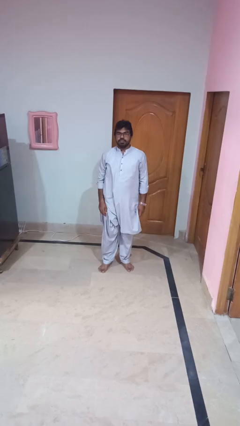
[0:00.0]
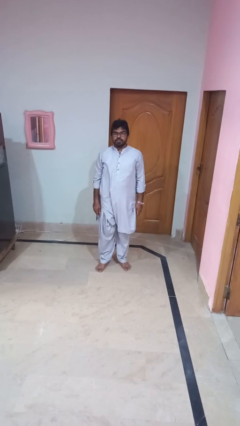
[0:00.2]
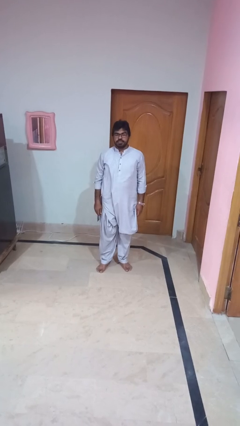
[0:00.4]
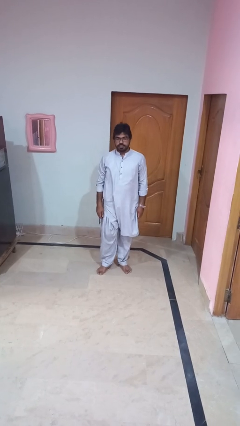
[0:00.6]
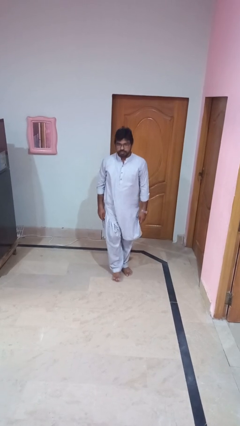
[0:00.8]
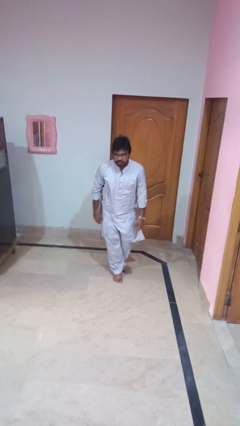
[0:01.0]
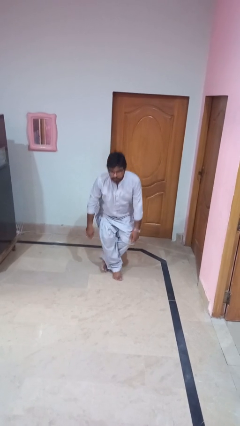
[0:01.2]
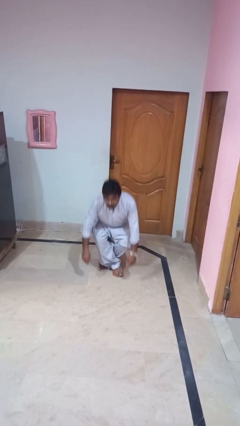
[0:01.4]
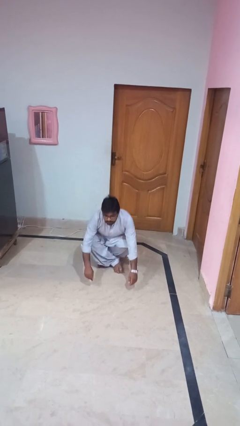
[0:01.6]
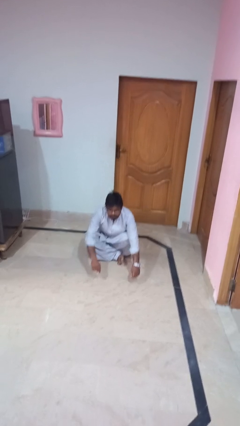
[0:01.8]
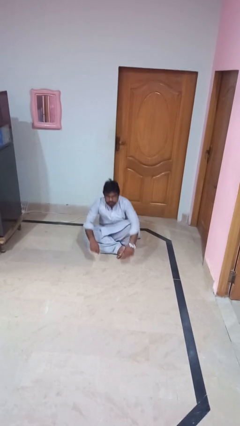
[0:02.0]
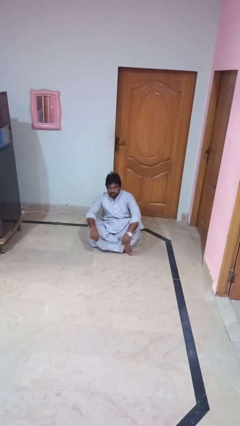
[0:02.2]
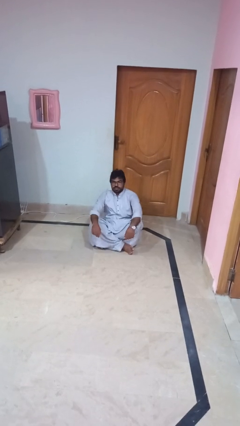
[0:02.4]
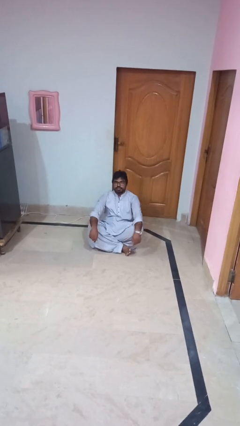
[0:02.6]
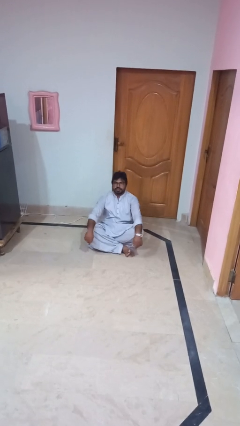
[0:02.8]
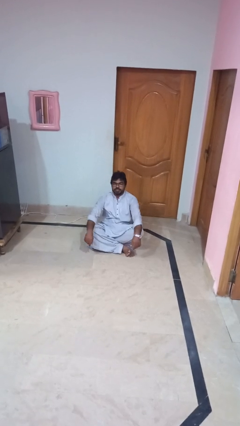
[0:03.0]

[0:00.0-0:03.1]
person sits crisscross

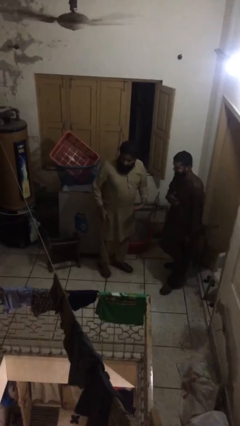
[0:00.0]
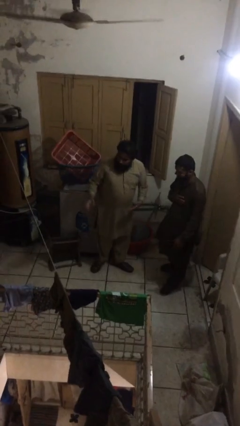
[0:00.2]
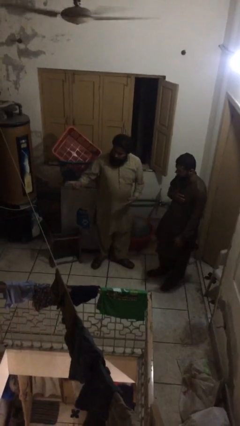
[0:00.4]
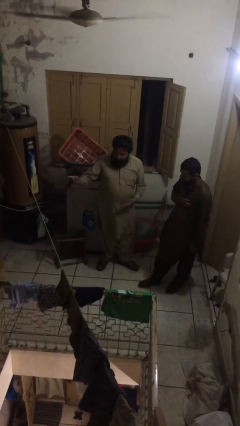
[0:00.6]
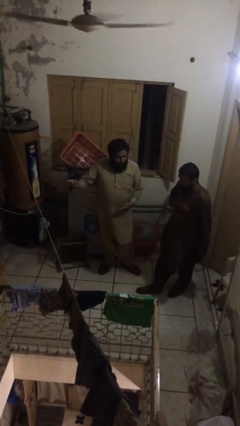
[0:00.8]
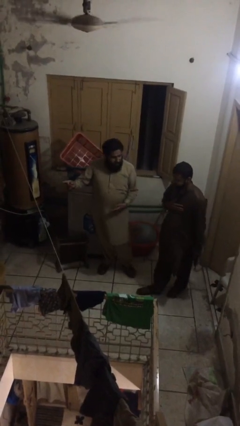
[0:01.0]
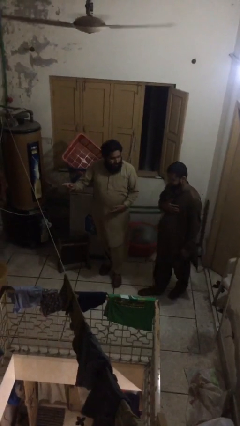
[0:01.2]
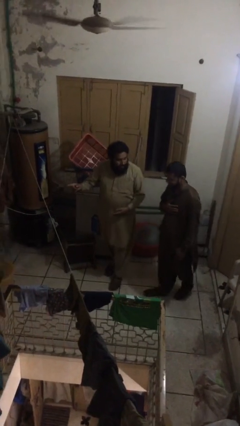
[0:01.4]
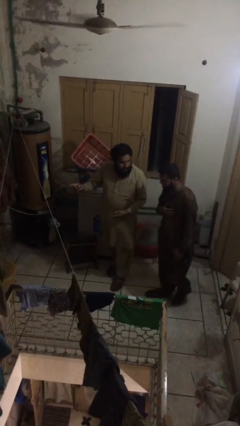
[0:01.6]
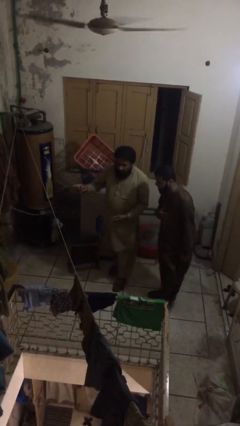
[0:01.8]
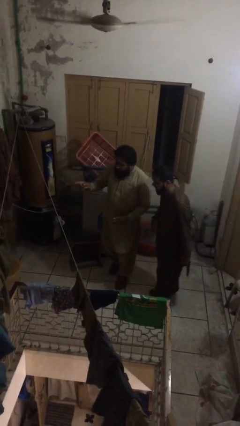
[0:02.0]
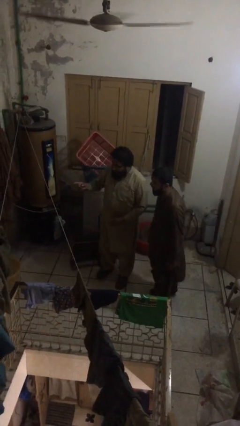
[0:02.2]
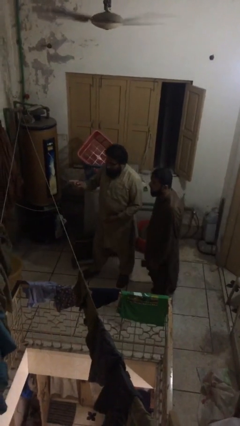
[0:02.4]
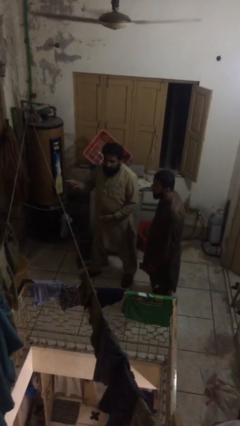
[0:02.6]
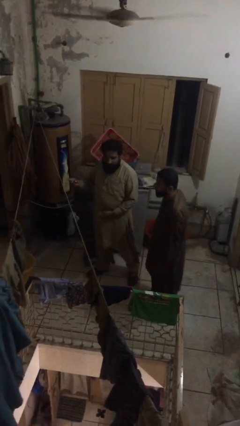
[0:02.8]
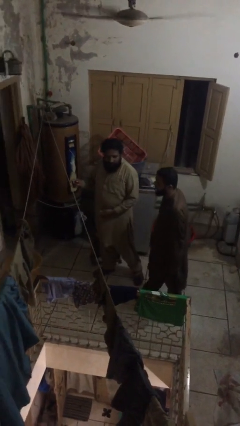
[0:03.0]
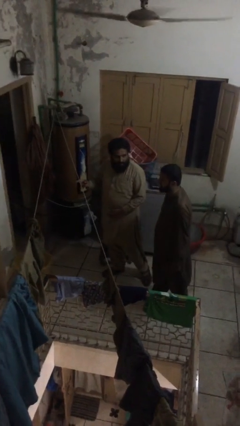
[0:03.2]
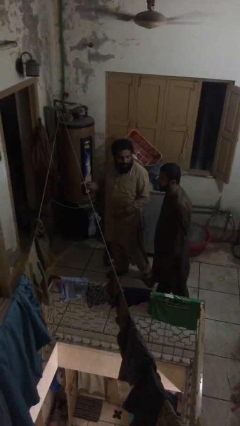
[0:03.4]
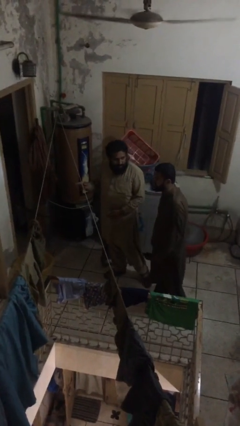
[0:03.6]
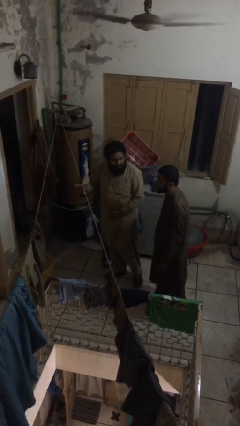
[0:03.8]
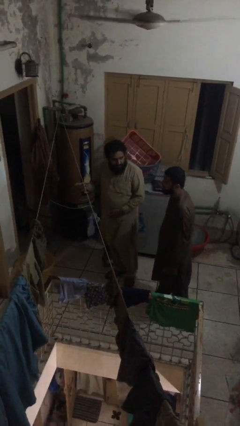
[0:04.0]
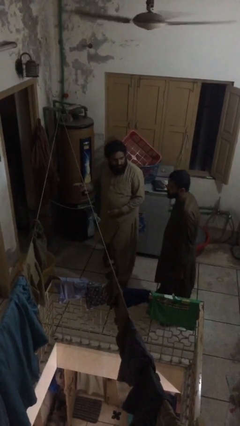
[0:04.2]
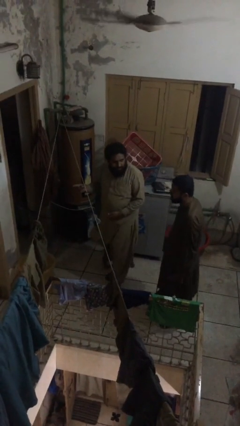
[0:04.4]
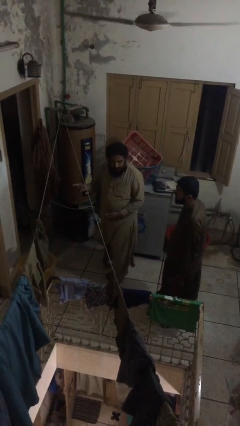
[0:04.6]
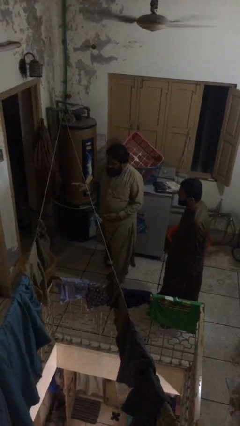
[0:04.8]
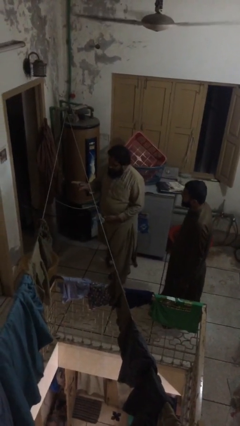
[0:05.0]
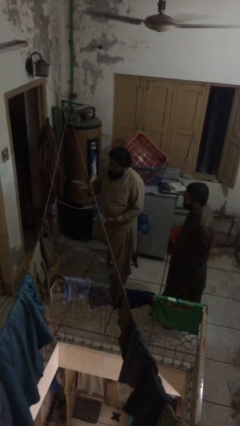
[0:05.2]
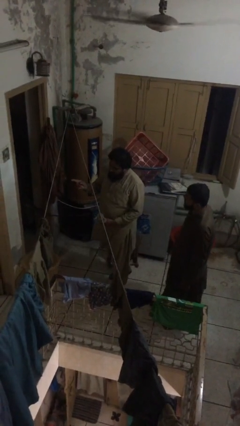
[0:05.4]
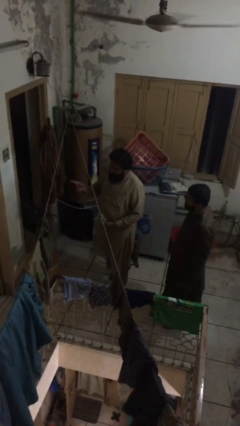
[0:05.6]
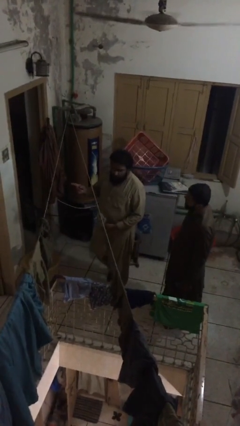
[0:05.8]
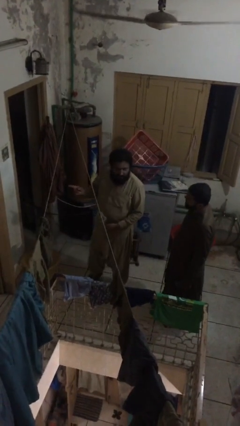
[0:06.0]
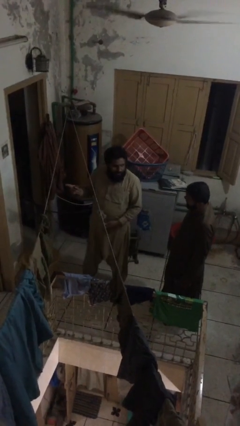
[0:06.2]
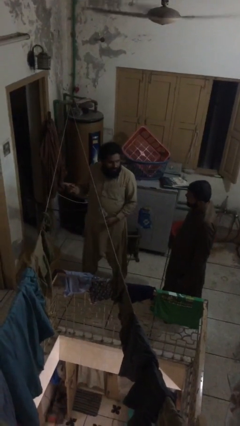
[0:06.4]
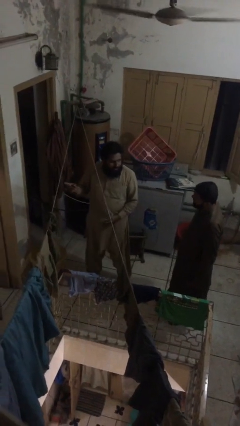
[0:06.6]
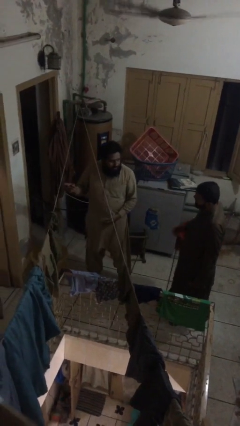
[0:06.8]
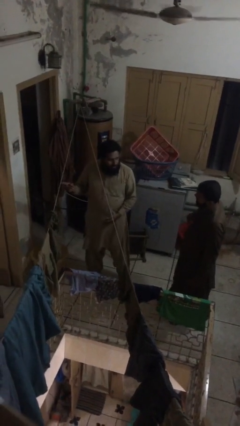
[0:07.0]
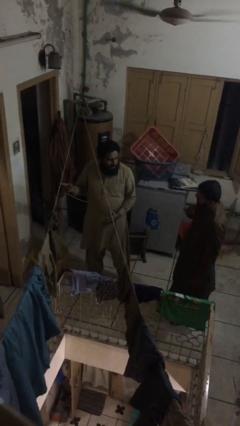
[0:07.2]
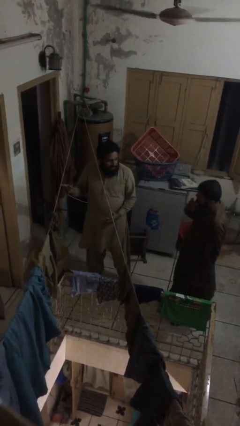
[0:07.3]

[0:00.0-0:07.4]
person talks to person

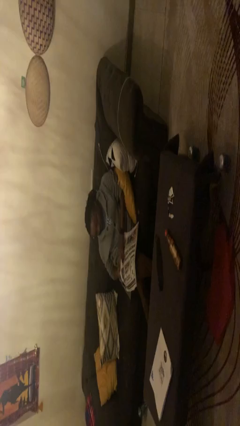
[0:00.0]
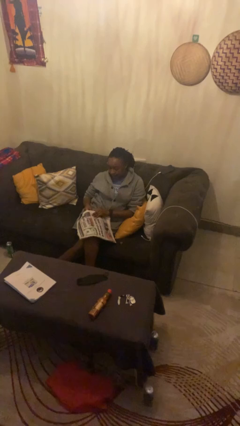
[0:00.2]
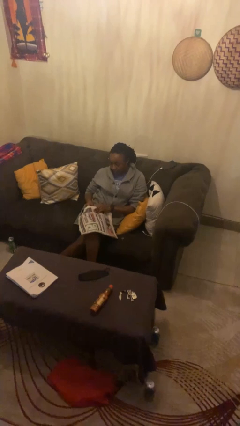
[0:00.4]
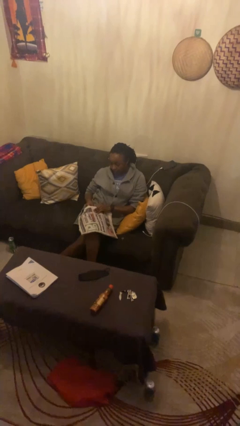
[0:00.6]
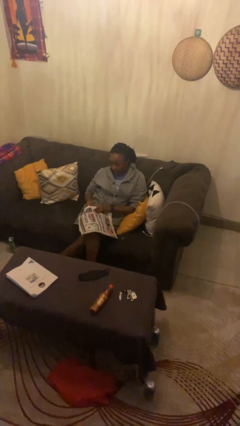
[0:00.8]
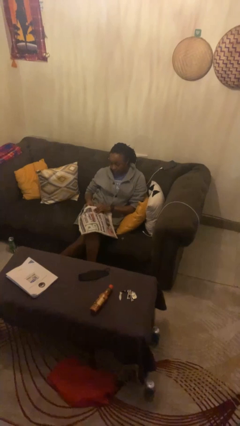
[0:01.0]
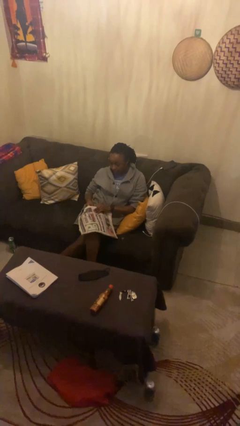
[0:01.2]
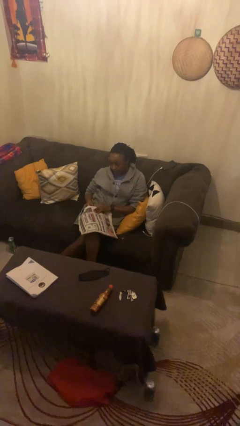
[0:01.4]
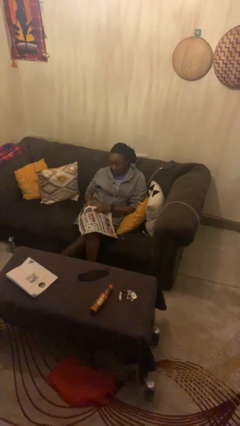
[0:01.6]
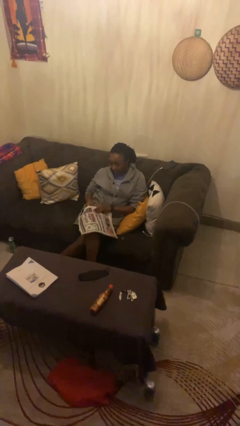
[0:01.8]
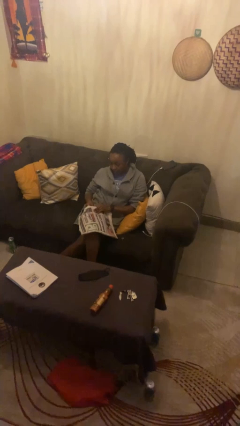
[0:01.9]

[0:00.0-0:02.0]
person reads newspaper

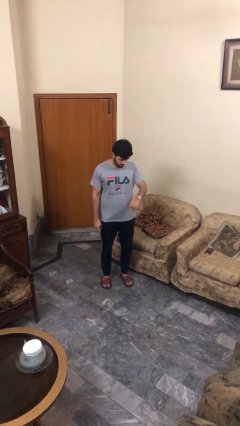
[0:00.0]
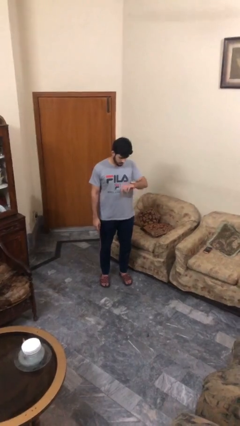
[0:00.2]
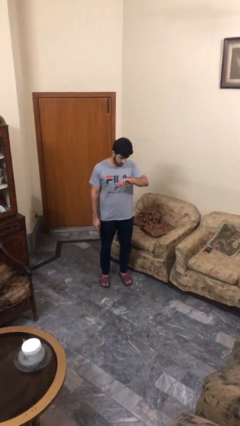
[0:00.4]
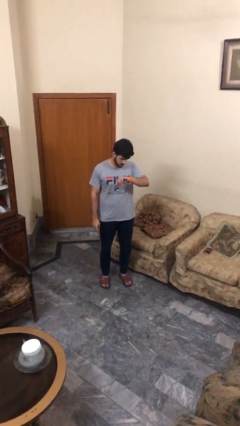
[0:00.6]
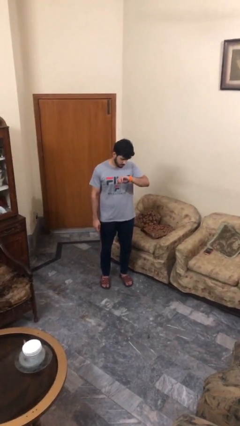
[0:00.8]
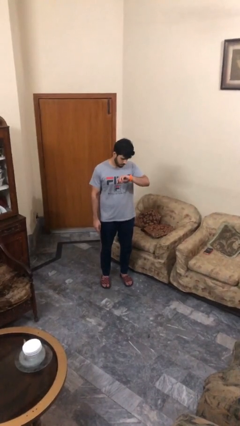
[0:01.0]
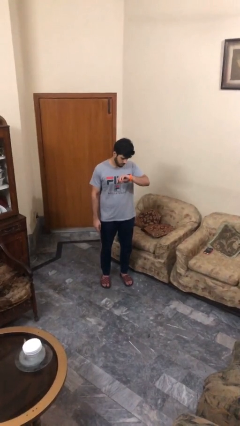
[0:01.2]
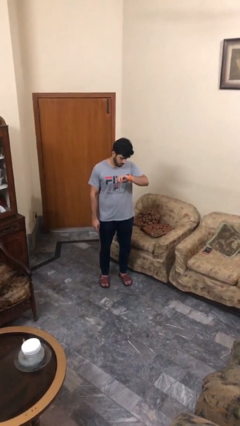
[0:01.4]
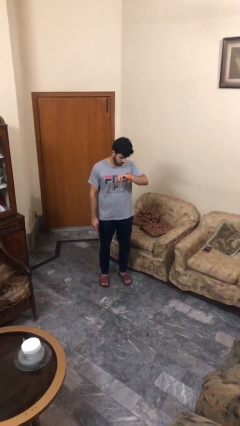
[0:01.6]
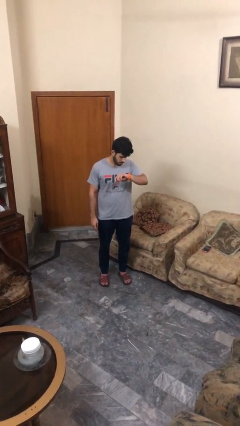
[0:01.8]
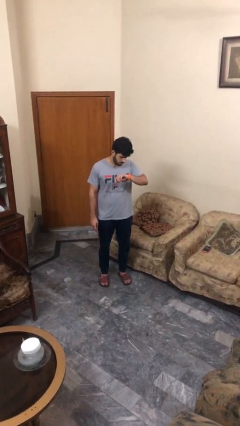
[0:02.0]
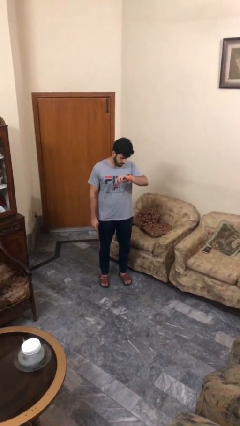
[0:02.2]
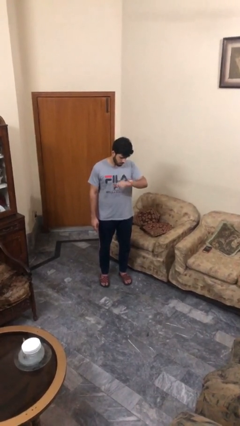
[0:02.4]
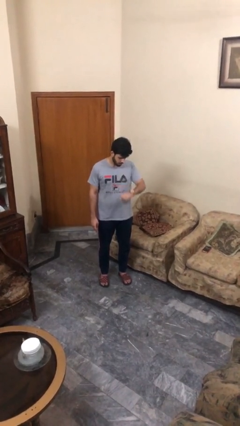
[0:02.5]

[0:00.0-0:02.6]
person looks at wristwatch

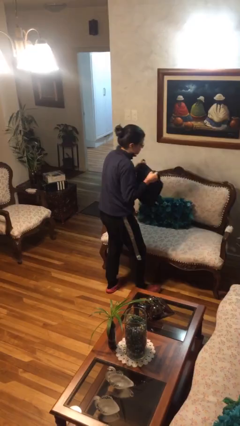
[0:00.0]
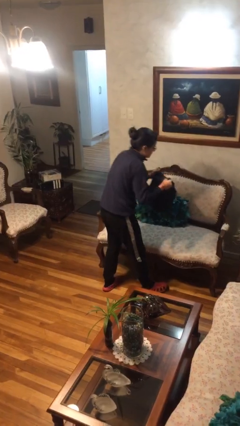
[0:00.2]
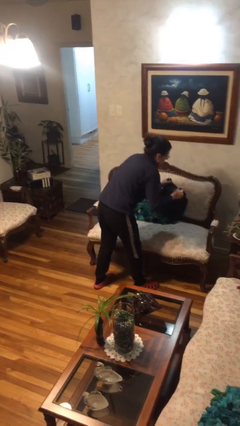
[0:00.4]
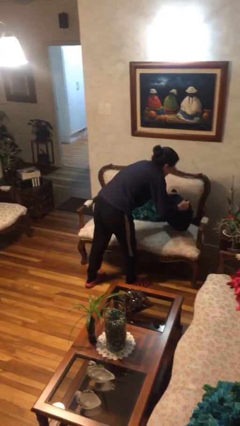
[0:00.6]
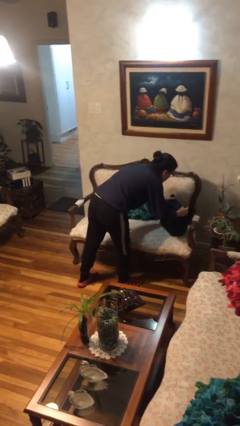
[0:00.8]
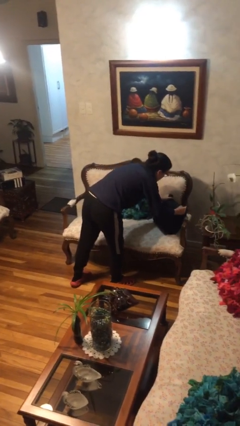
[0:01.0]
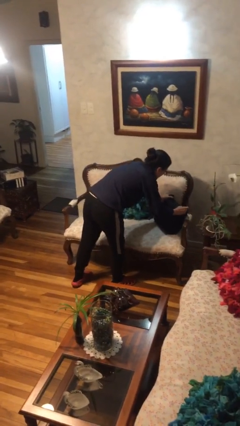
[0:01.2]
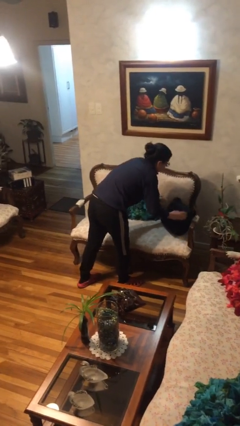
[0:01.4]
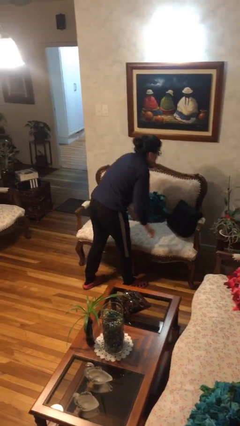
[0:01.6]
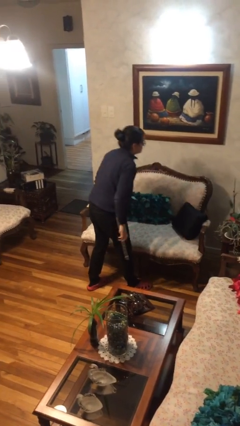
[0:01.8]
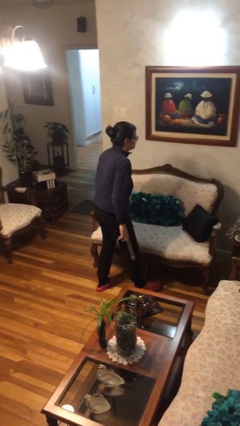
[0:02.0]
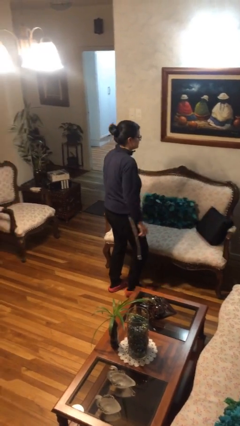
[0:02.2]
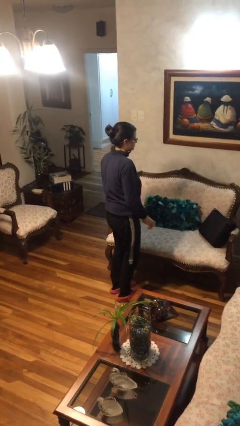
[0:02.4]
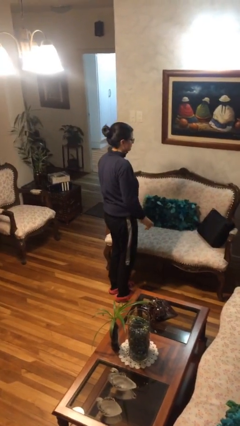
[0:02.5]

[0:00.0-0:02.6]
person puts down object on couch
